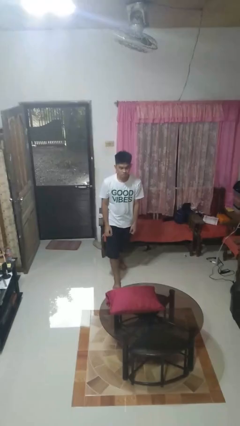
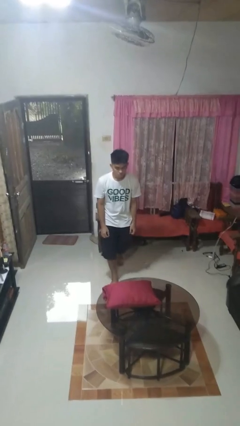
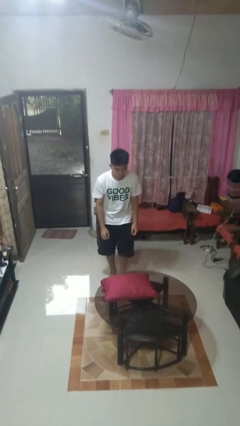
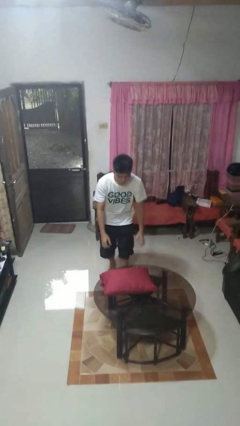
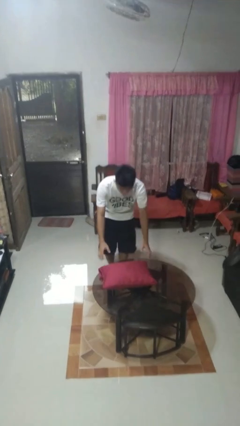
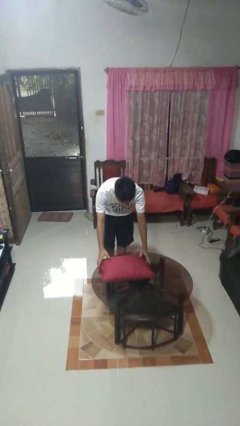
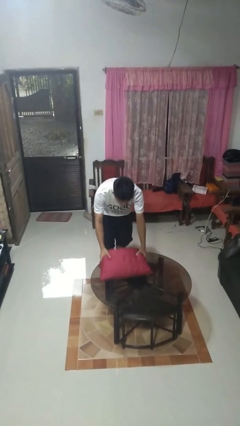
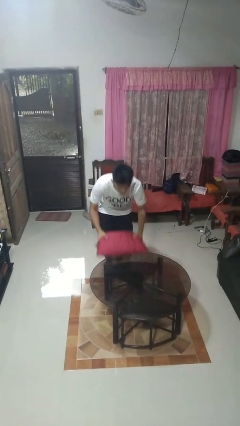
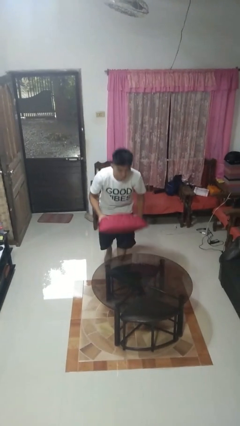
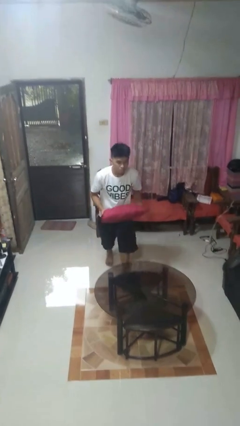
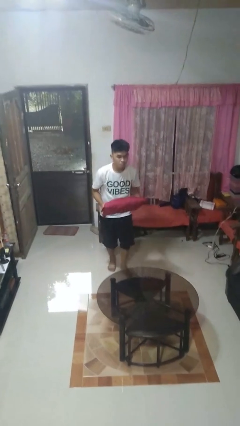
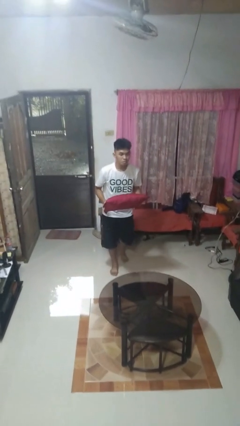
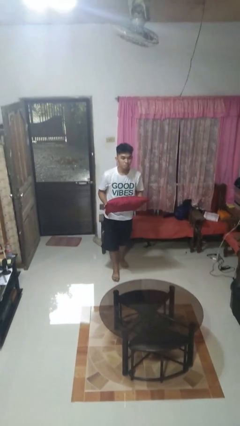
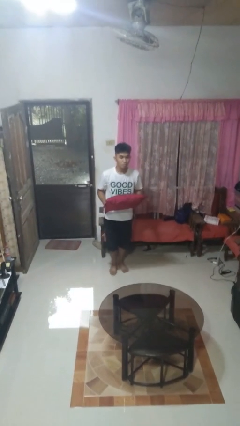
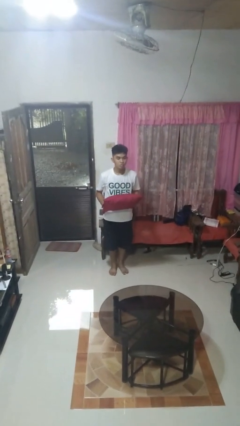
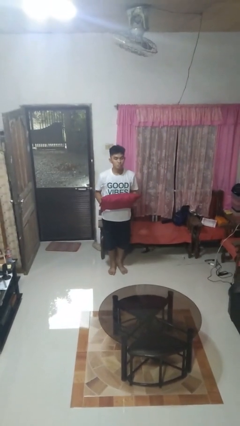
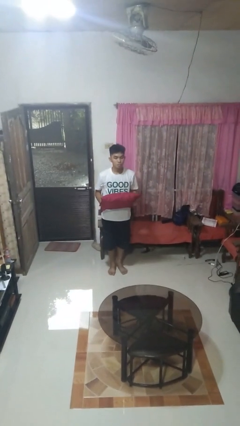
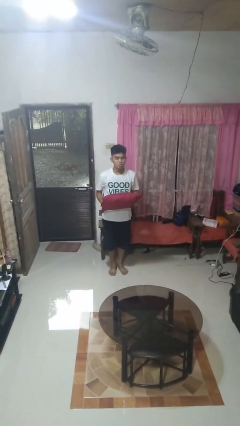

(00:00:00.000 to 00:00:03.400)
person picks up object from table

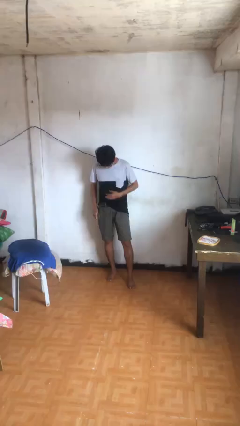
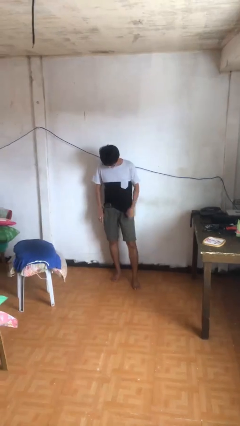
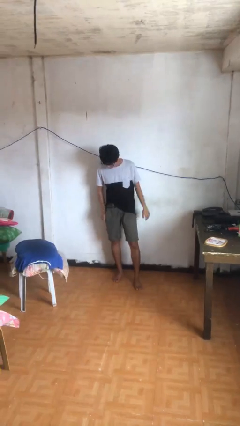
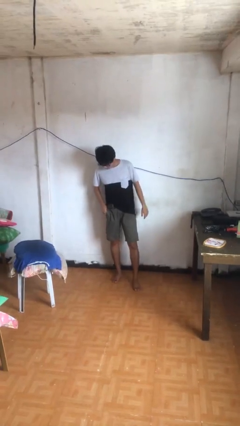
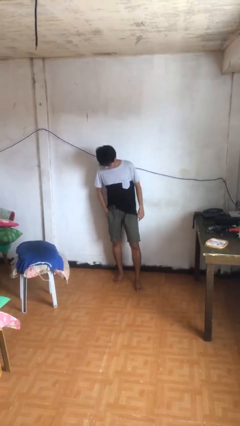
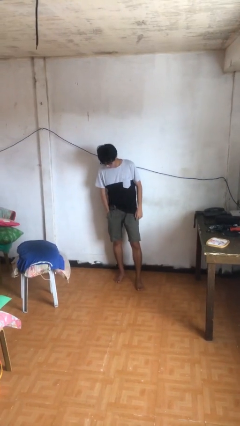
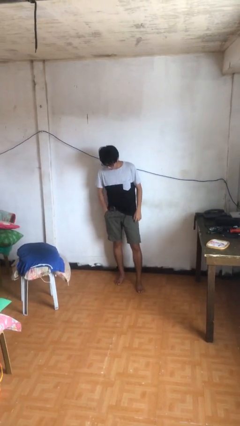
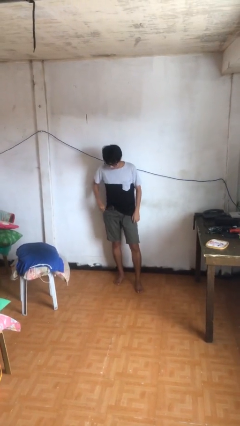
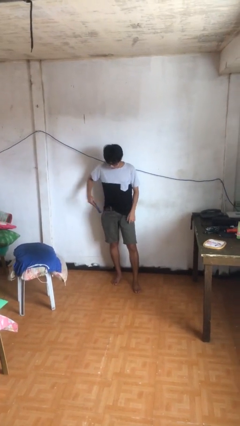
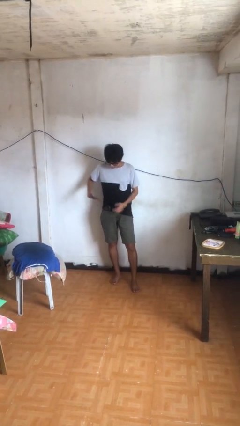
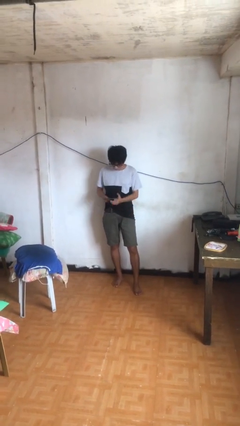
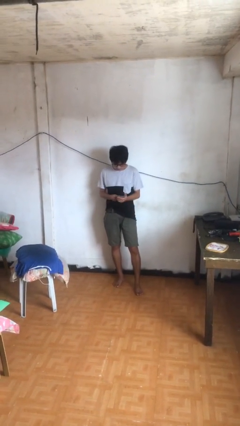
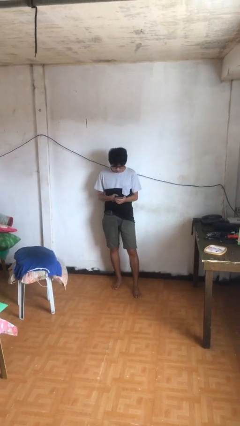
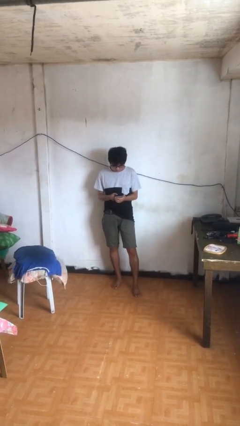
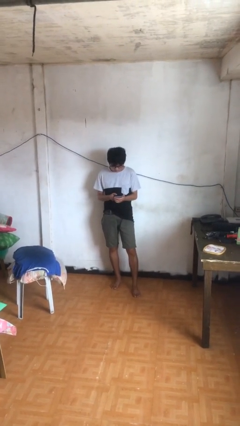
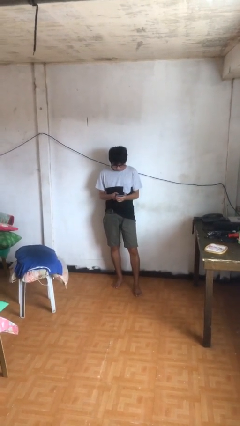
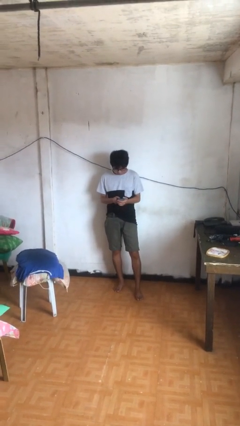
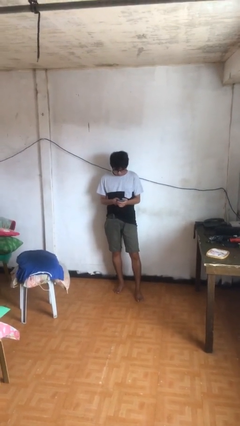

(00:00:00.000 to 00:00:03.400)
person takes phone from pocket

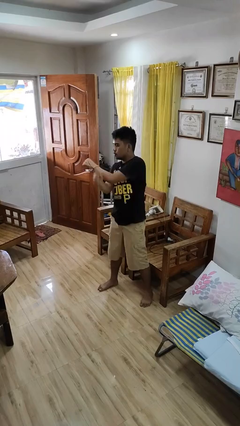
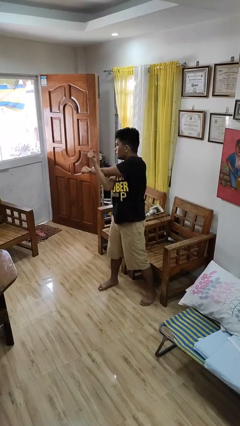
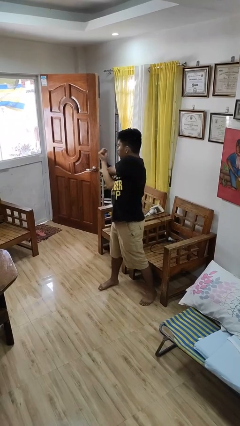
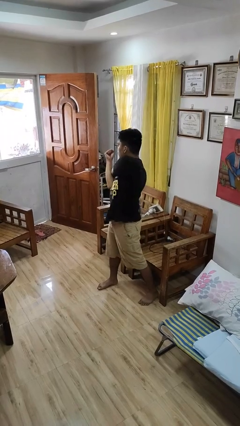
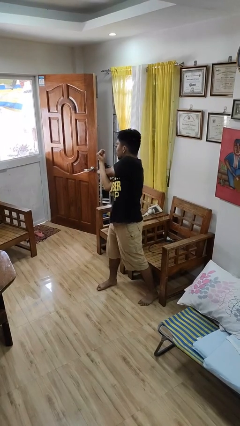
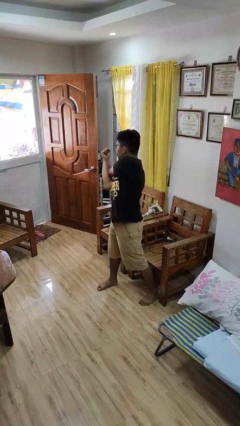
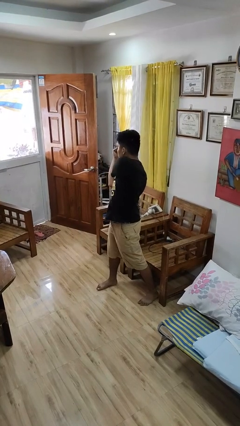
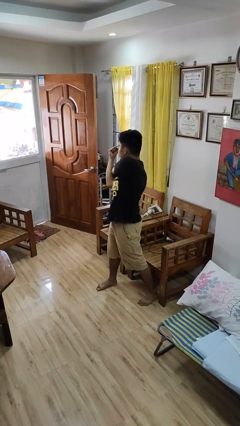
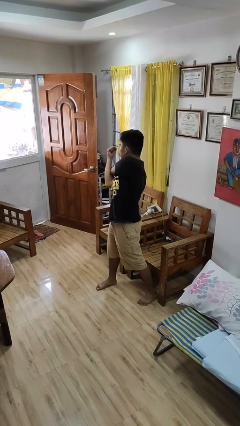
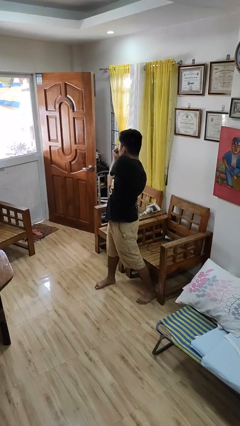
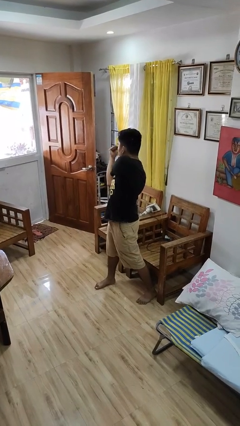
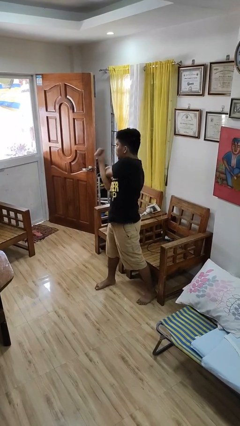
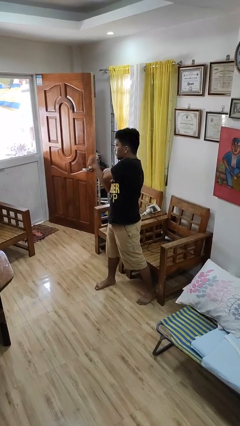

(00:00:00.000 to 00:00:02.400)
person stretches arms to side

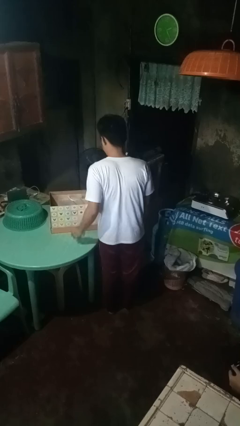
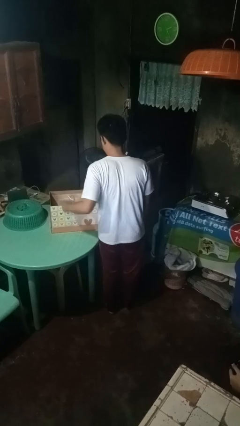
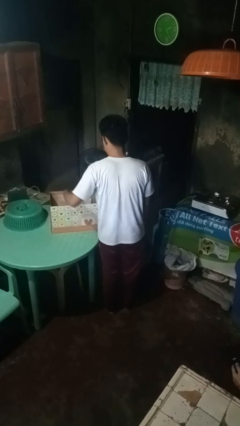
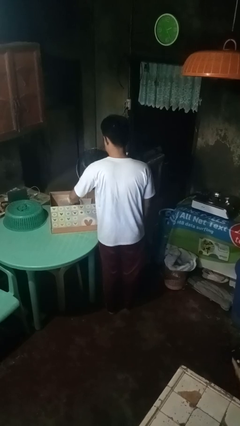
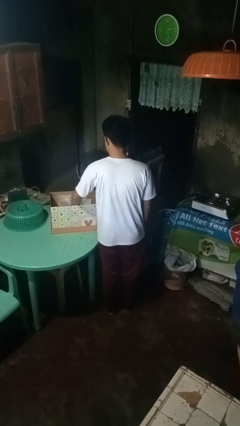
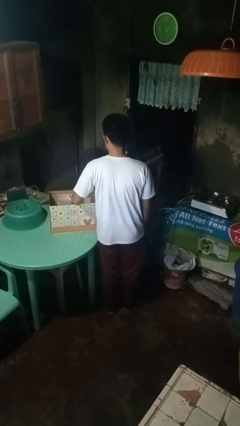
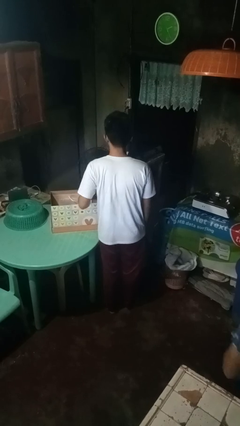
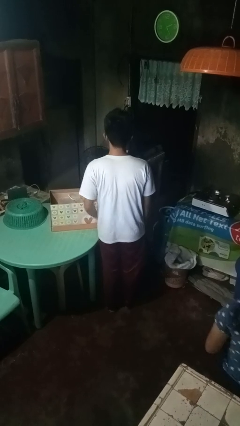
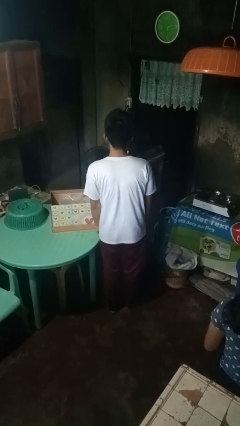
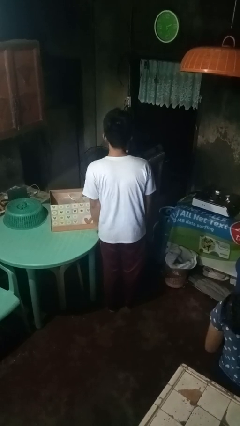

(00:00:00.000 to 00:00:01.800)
person puts object into box

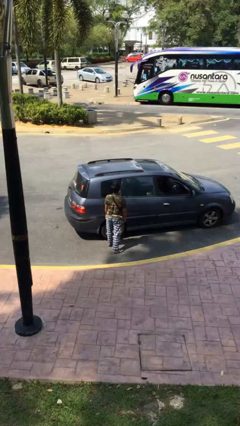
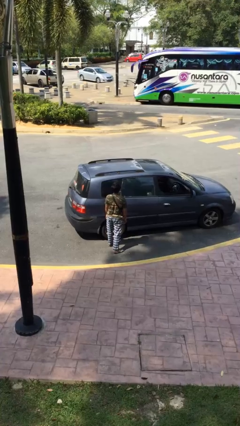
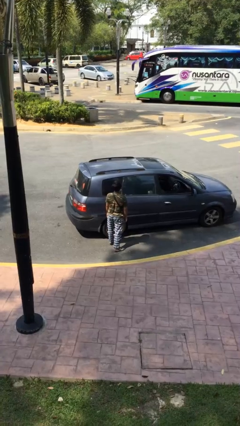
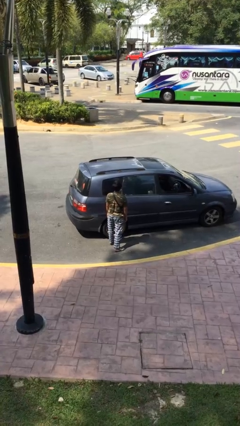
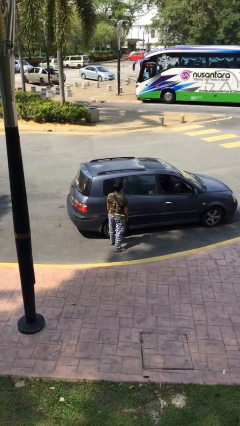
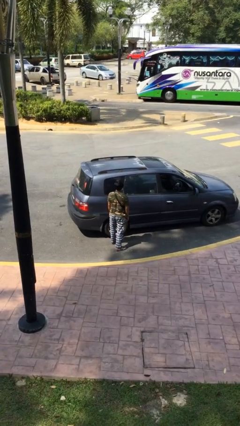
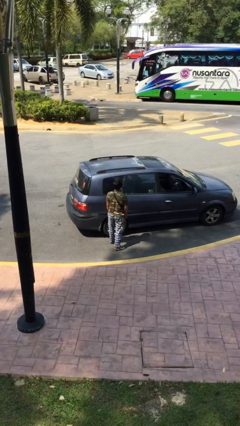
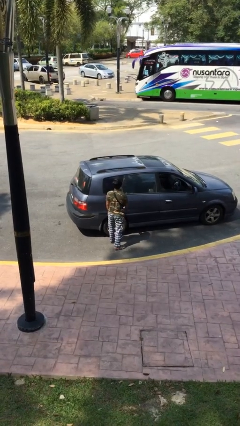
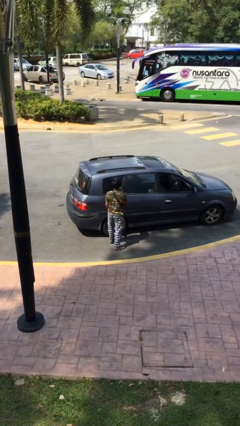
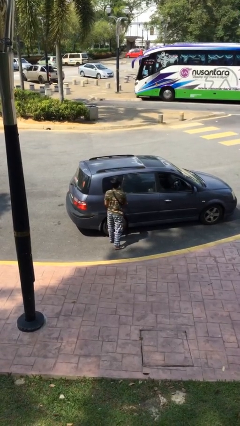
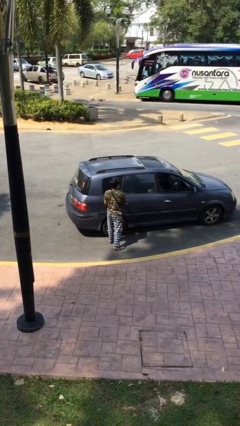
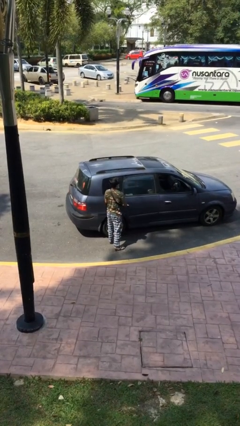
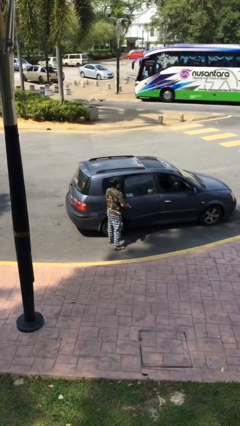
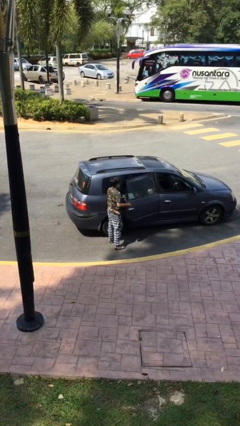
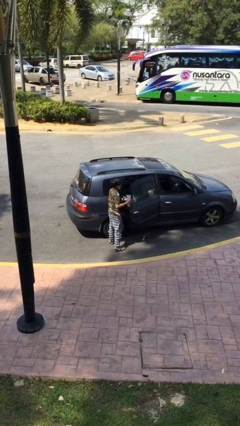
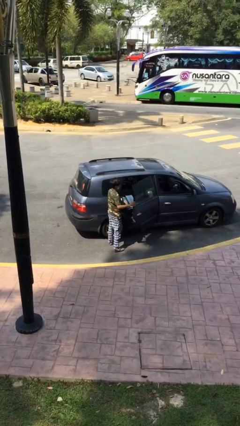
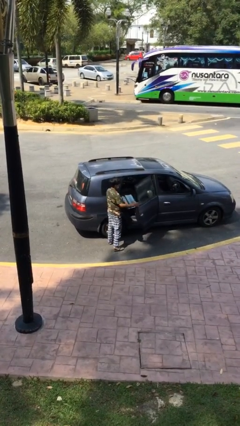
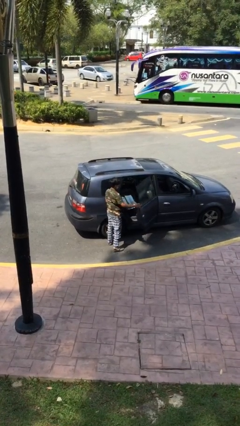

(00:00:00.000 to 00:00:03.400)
person opens car door

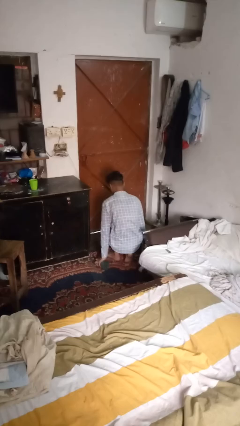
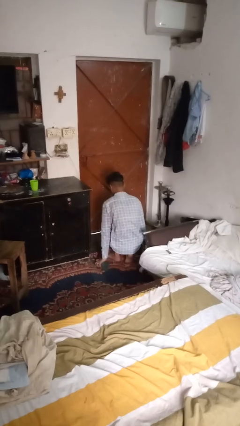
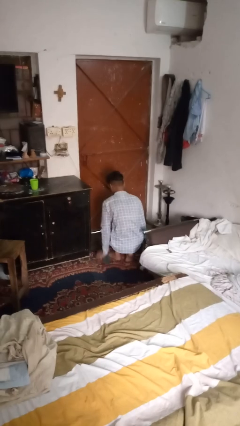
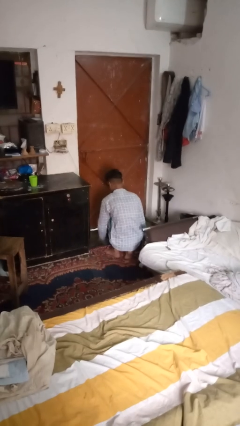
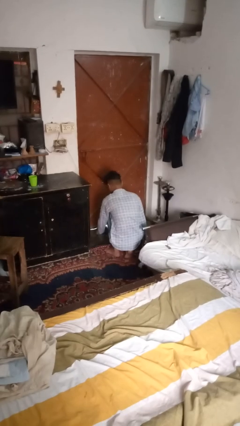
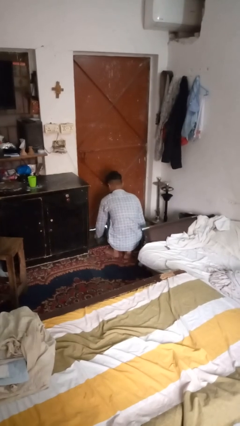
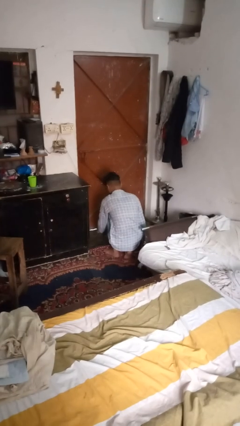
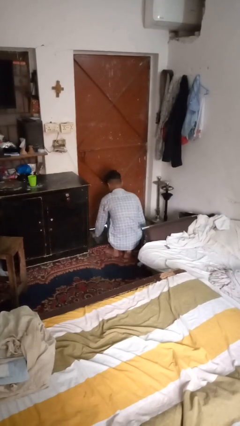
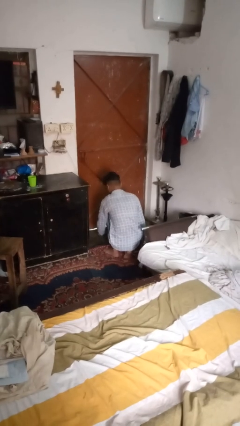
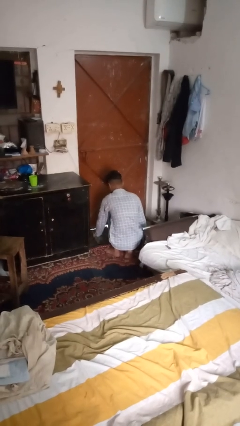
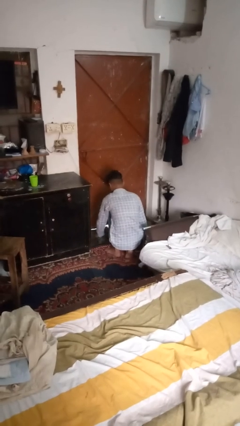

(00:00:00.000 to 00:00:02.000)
person mops

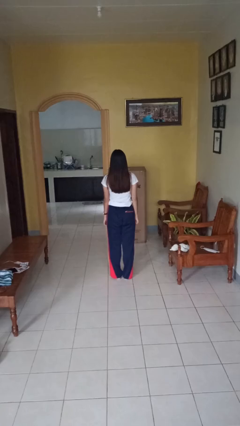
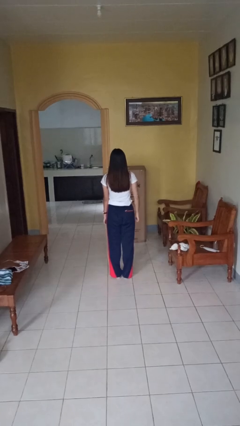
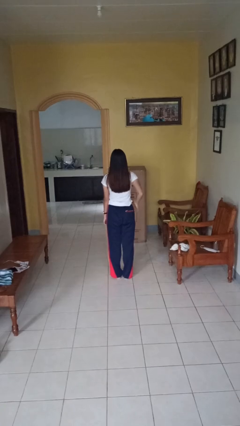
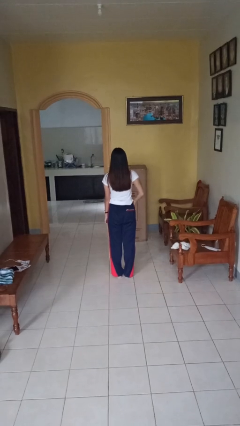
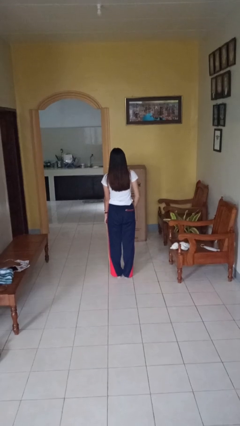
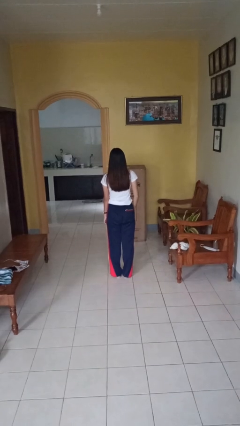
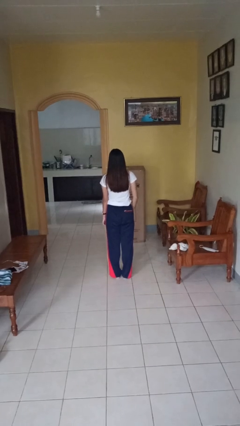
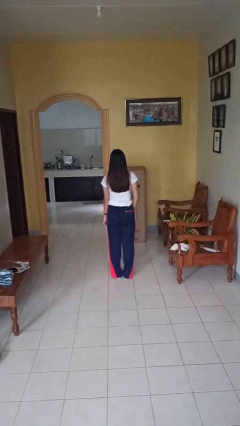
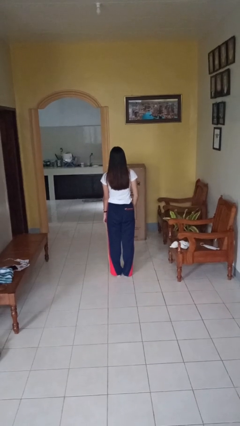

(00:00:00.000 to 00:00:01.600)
person puts hands in back pockets
